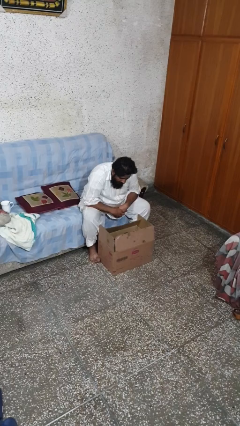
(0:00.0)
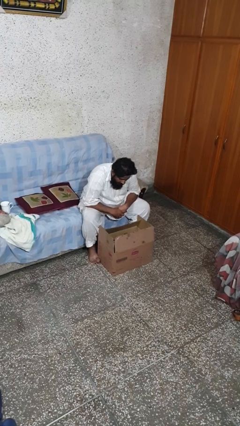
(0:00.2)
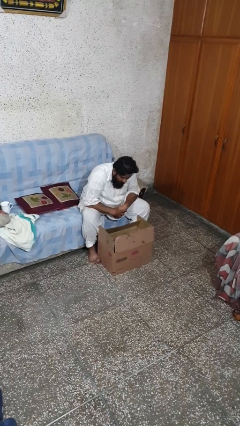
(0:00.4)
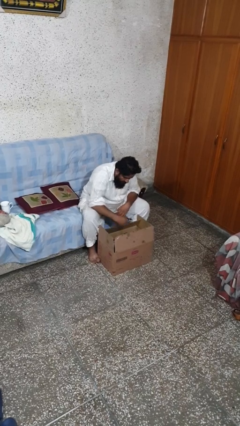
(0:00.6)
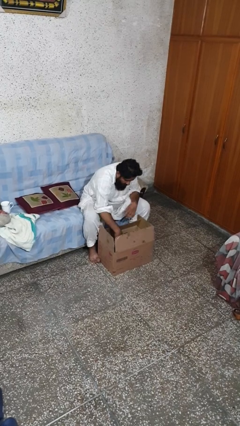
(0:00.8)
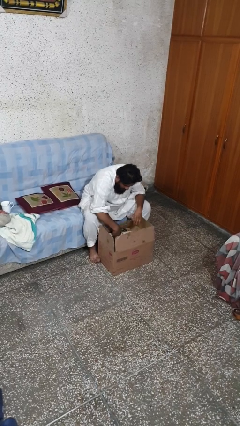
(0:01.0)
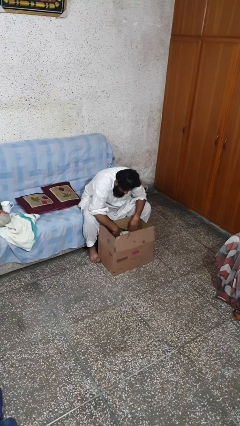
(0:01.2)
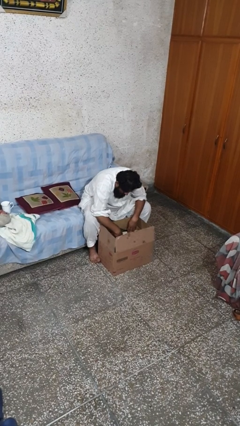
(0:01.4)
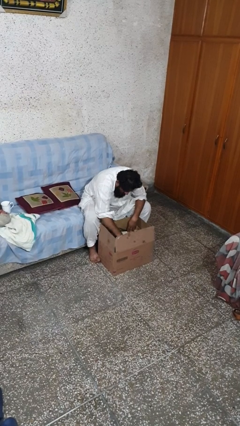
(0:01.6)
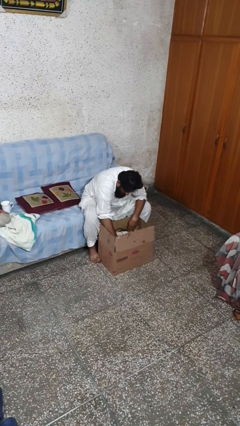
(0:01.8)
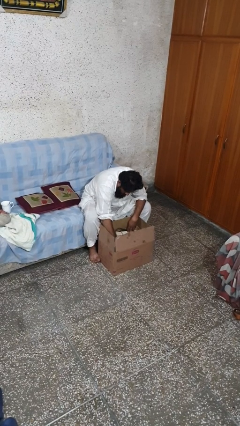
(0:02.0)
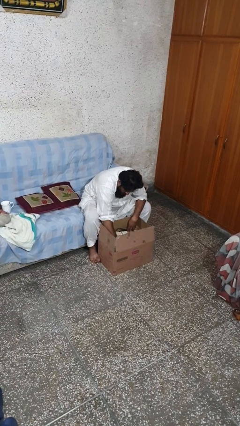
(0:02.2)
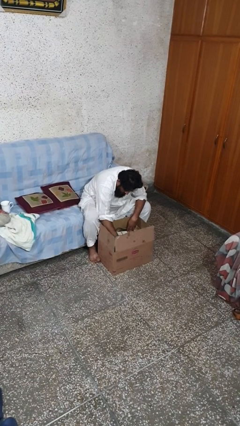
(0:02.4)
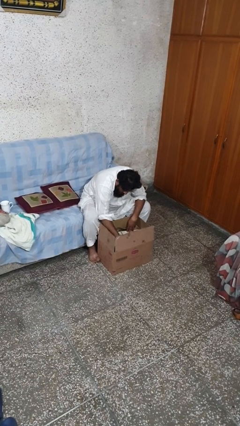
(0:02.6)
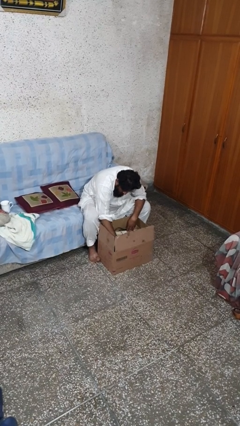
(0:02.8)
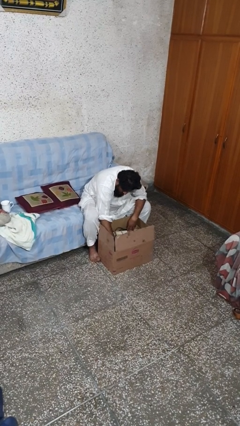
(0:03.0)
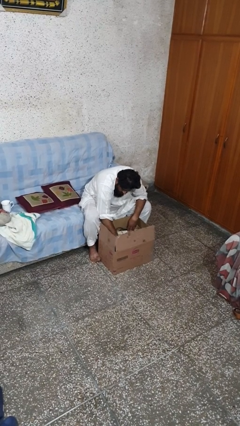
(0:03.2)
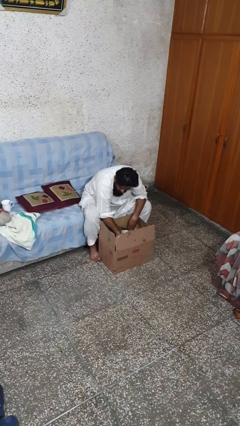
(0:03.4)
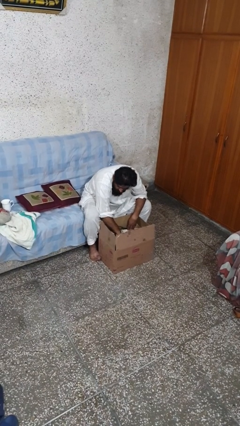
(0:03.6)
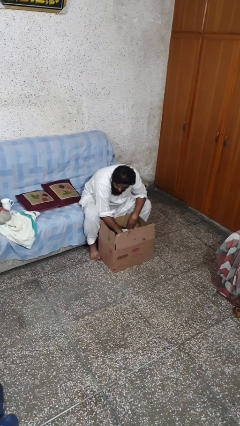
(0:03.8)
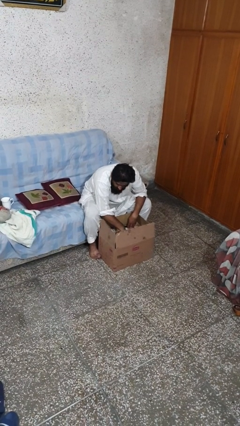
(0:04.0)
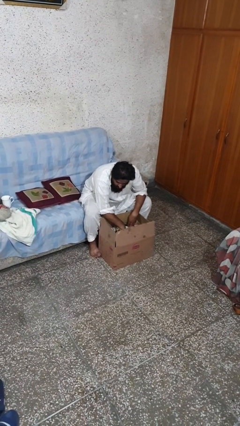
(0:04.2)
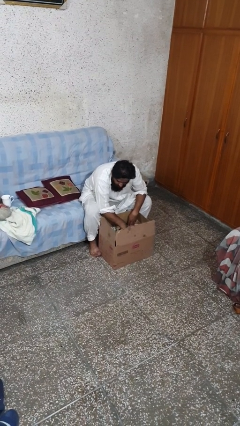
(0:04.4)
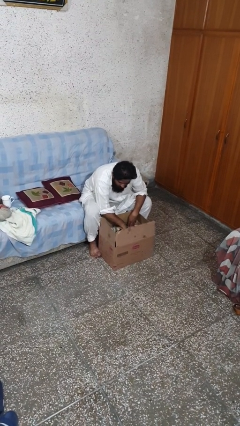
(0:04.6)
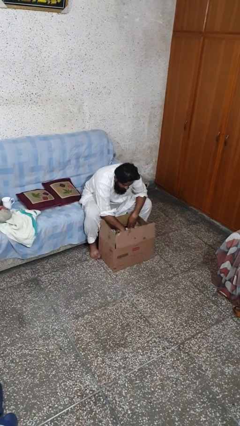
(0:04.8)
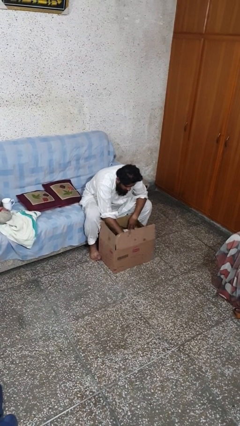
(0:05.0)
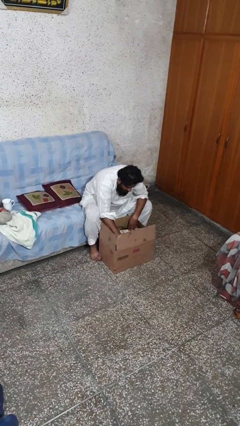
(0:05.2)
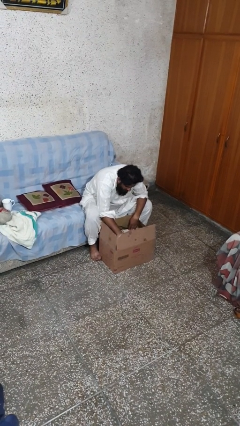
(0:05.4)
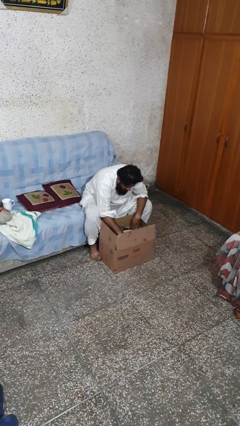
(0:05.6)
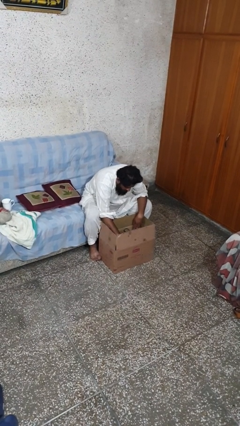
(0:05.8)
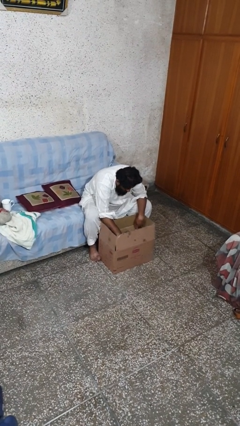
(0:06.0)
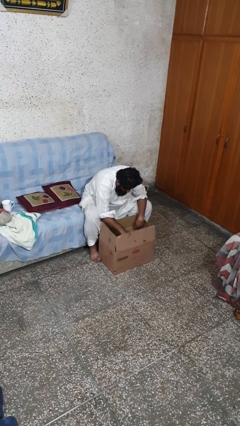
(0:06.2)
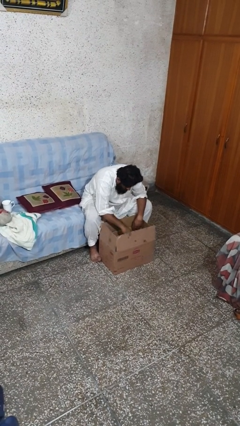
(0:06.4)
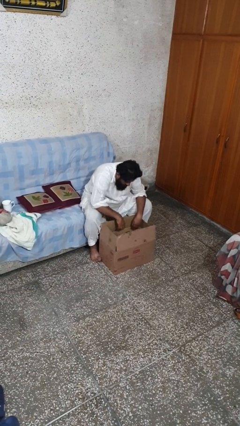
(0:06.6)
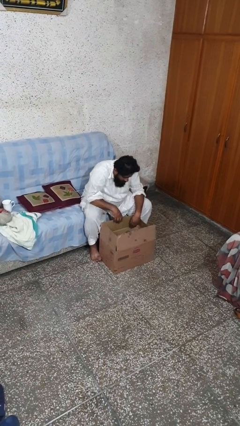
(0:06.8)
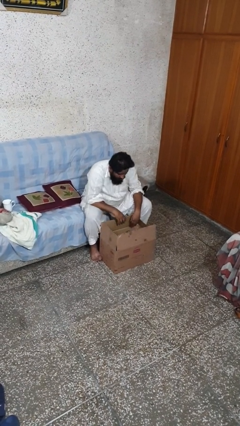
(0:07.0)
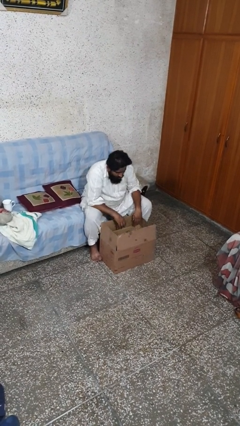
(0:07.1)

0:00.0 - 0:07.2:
person searches in box

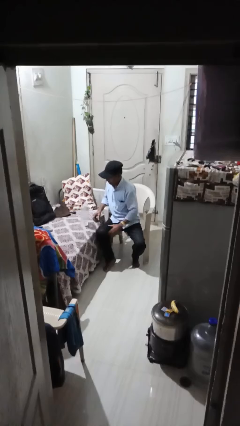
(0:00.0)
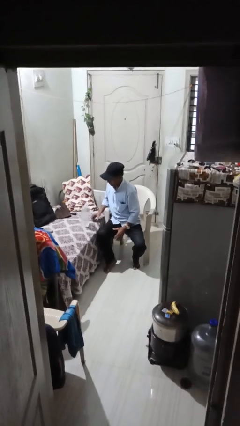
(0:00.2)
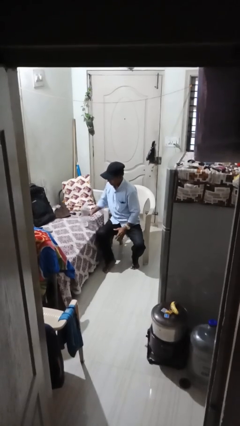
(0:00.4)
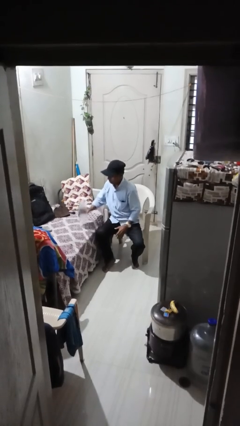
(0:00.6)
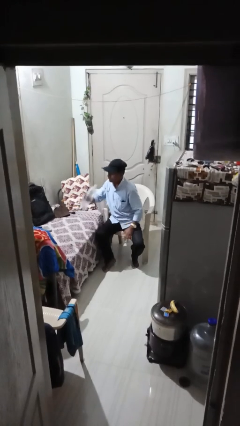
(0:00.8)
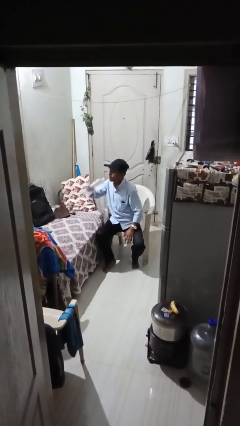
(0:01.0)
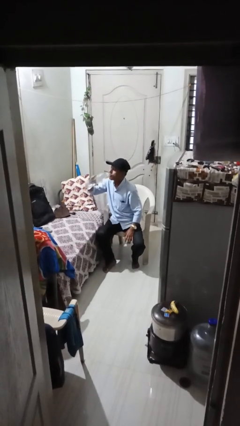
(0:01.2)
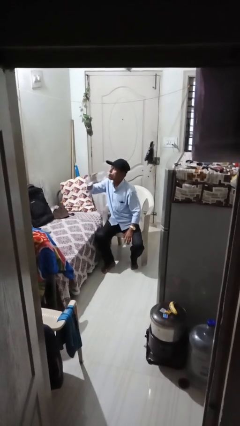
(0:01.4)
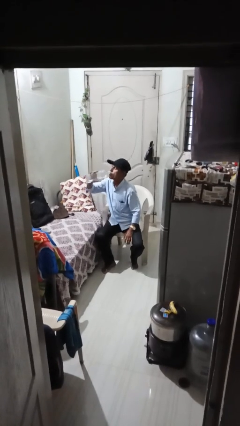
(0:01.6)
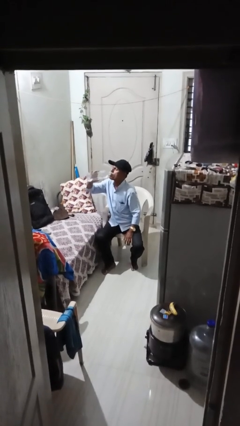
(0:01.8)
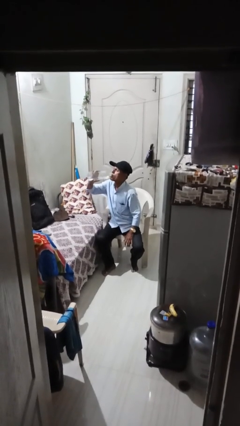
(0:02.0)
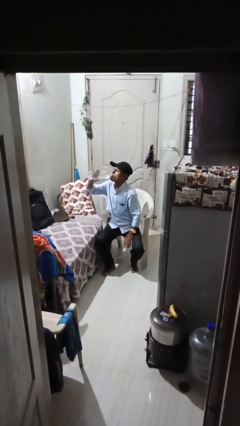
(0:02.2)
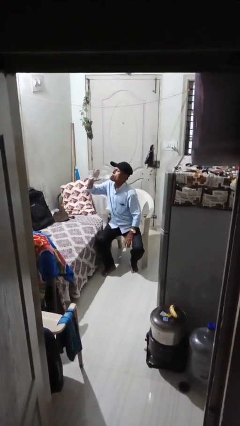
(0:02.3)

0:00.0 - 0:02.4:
person drinks from bottle

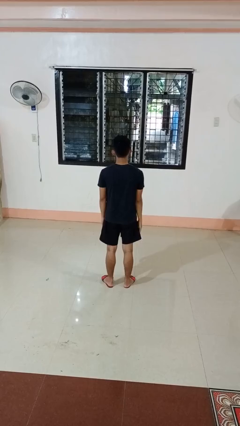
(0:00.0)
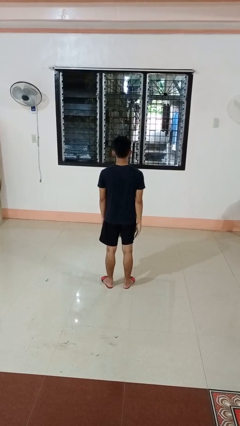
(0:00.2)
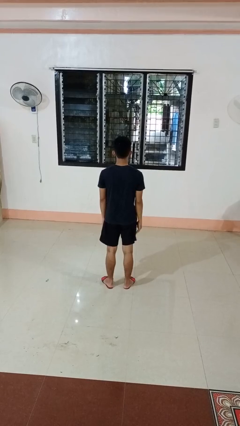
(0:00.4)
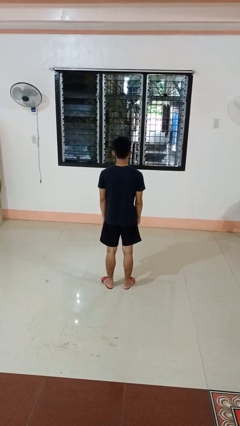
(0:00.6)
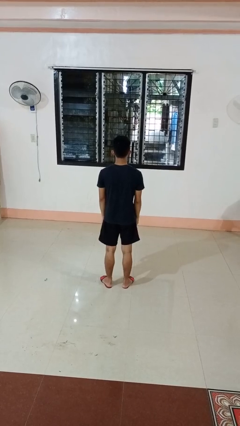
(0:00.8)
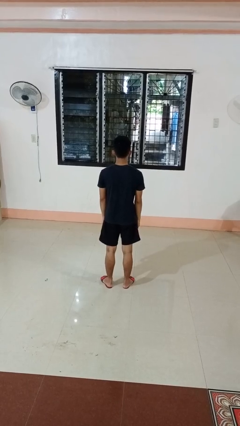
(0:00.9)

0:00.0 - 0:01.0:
person gestures swipe down

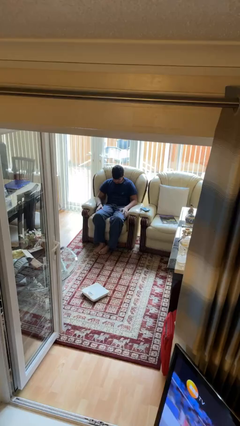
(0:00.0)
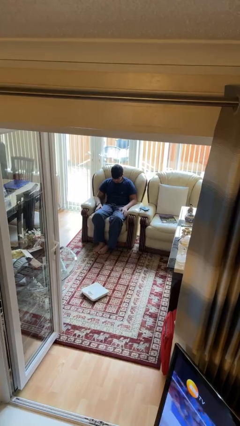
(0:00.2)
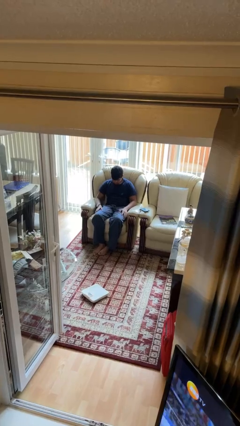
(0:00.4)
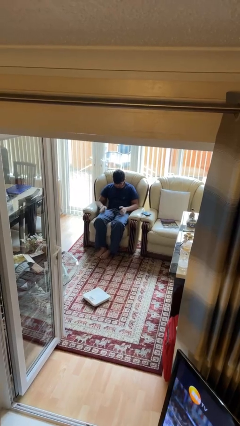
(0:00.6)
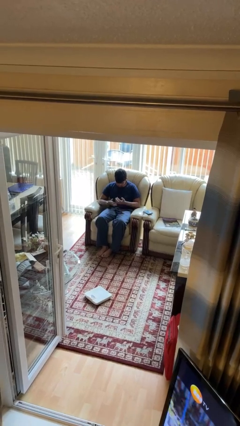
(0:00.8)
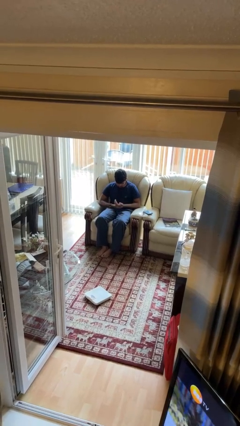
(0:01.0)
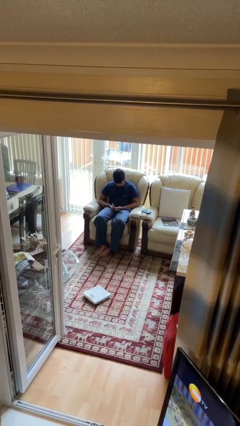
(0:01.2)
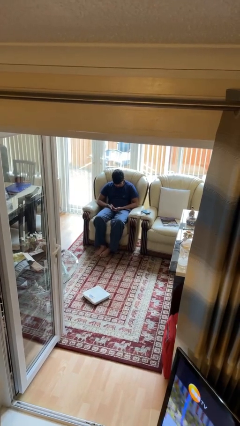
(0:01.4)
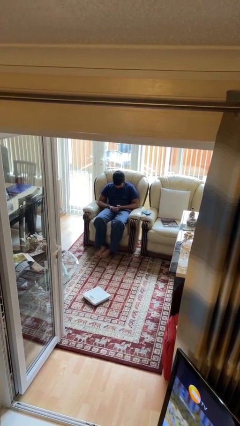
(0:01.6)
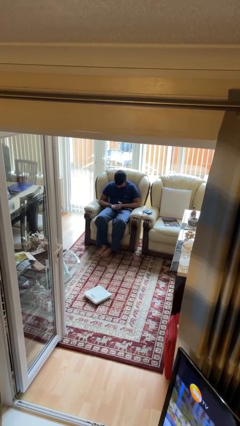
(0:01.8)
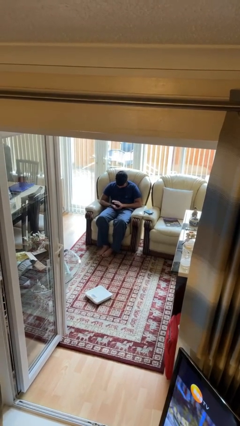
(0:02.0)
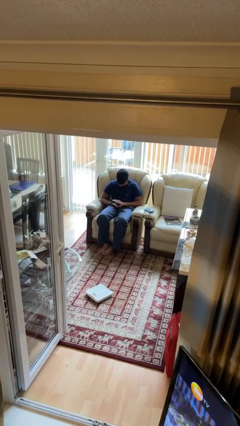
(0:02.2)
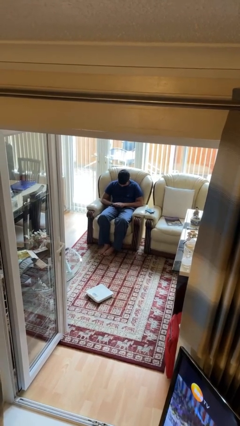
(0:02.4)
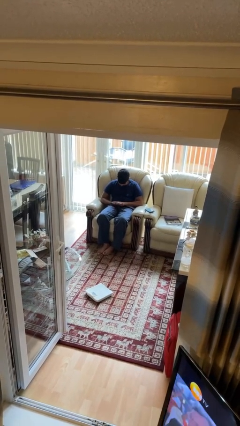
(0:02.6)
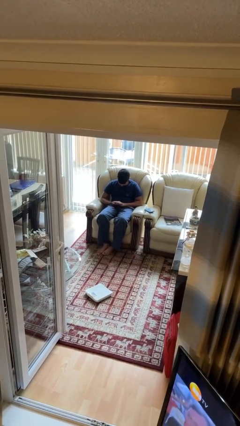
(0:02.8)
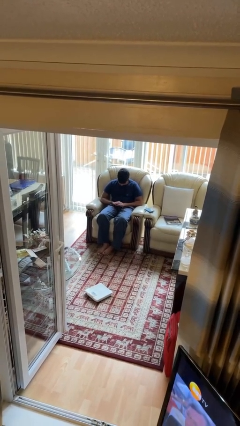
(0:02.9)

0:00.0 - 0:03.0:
person looks at hands in lap

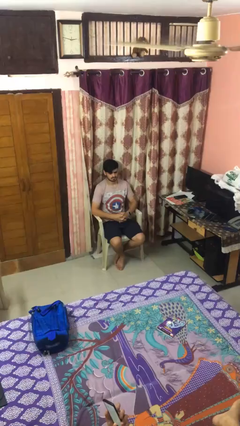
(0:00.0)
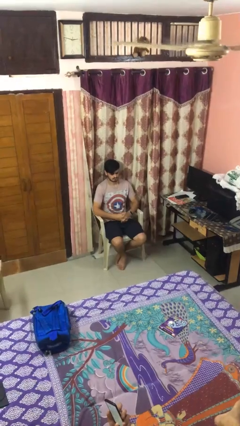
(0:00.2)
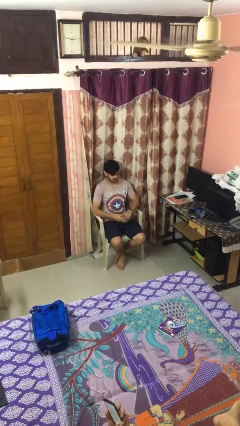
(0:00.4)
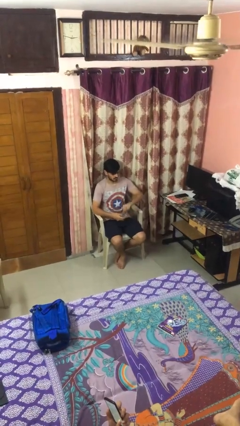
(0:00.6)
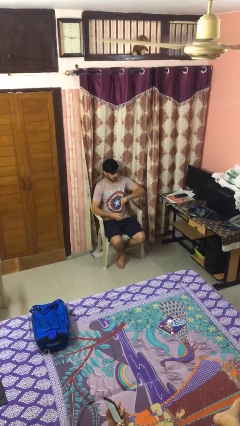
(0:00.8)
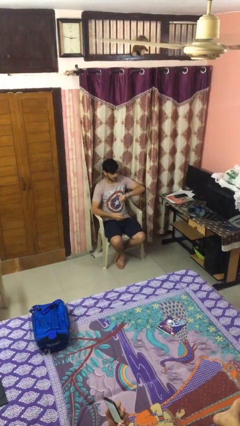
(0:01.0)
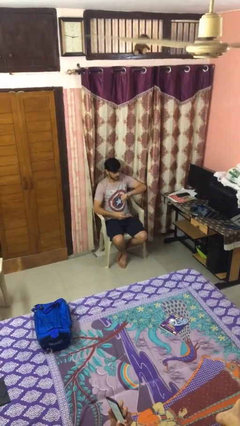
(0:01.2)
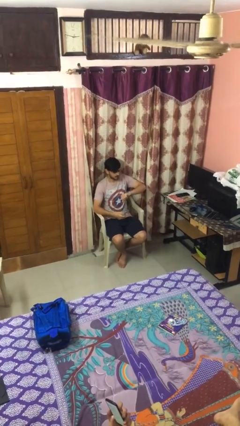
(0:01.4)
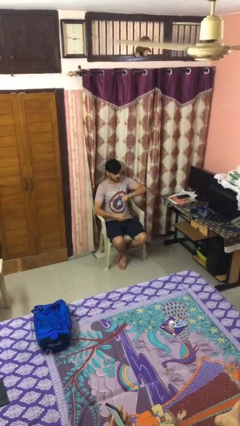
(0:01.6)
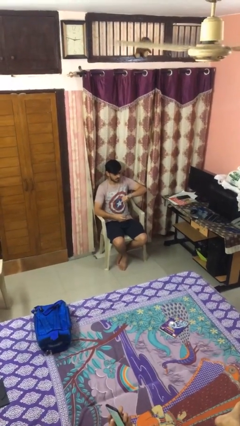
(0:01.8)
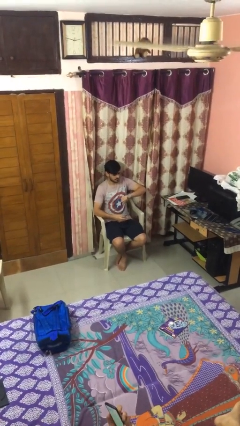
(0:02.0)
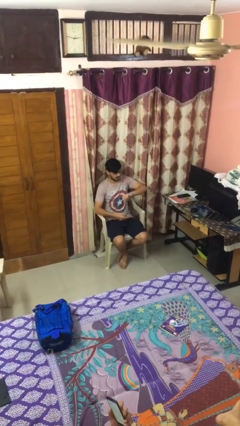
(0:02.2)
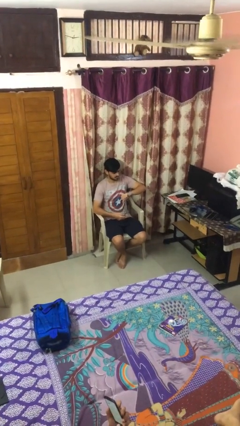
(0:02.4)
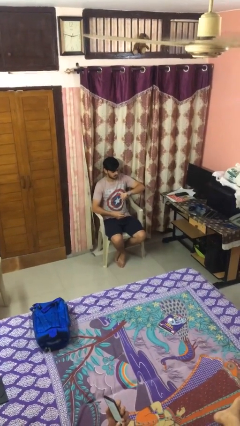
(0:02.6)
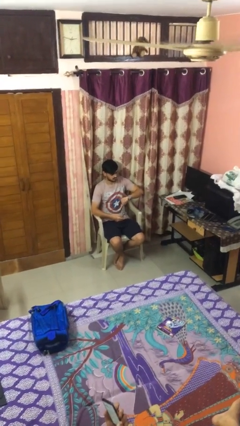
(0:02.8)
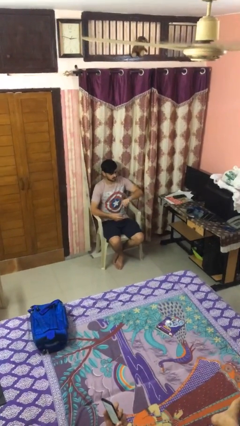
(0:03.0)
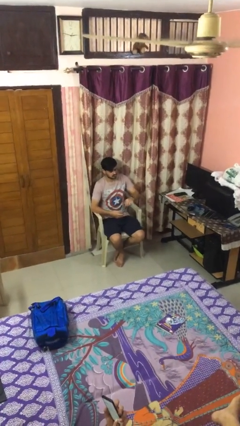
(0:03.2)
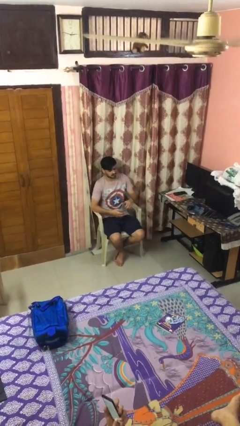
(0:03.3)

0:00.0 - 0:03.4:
person looks at wristwatch

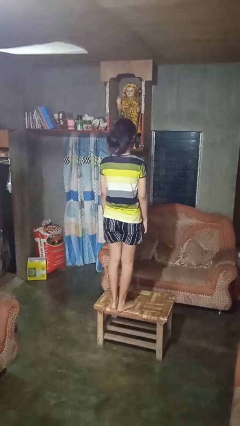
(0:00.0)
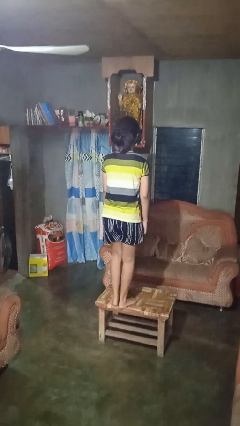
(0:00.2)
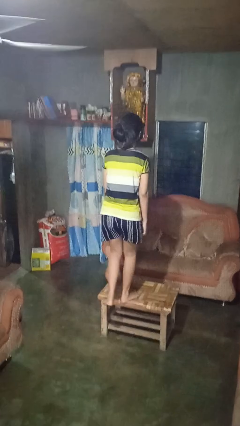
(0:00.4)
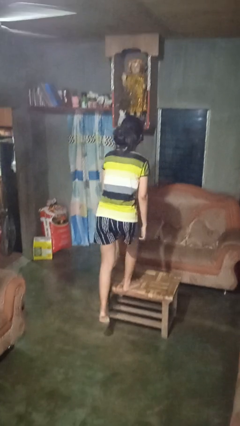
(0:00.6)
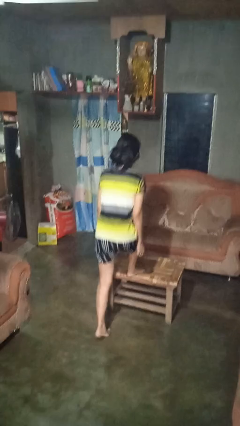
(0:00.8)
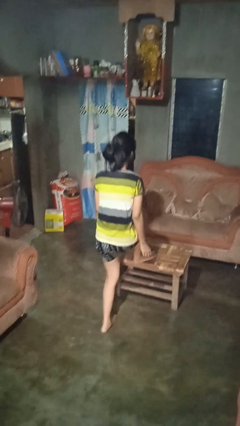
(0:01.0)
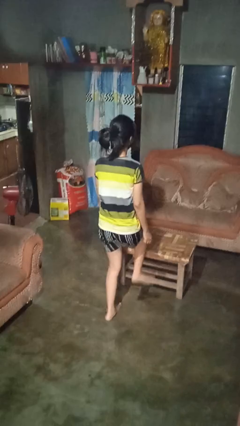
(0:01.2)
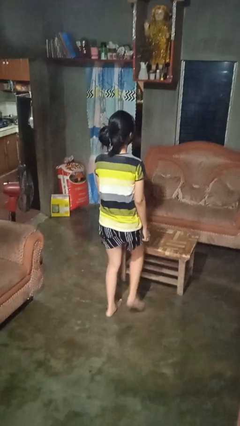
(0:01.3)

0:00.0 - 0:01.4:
person climbs off table
